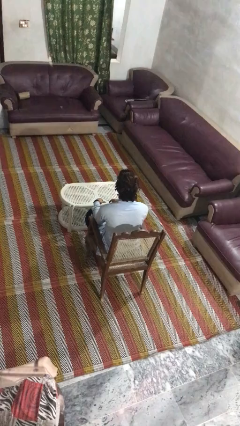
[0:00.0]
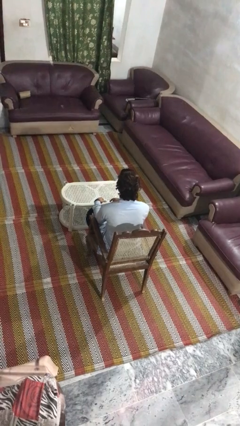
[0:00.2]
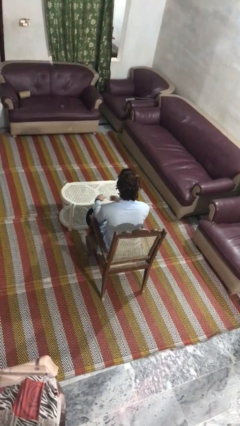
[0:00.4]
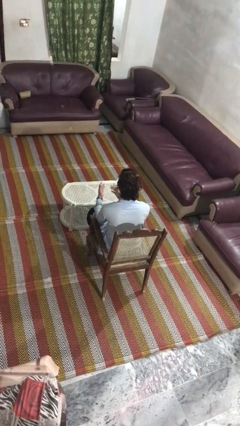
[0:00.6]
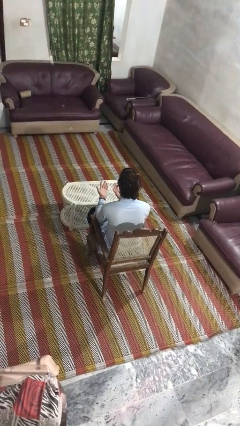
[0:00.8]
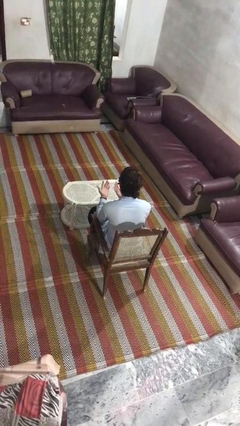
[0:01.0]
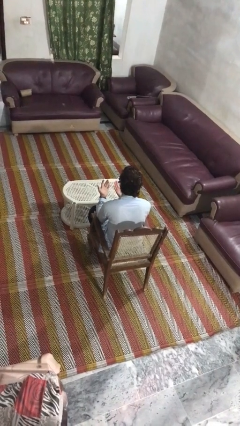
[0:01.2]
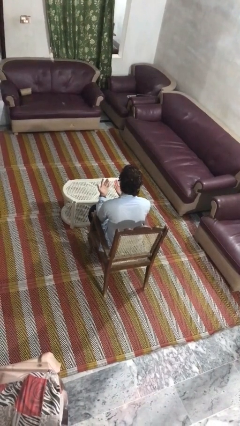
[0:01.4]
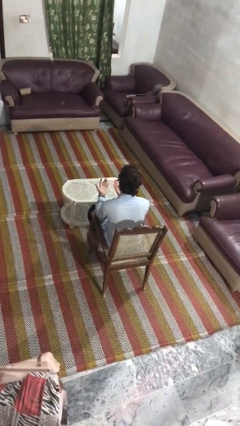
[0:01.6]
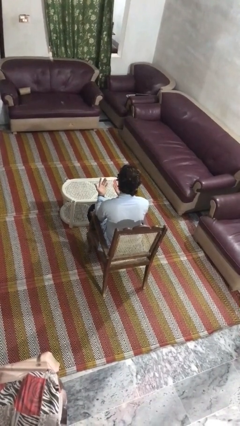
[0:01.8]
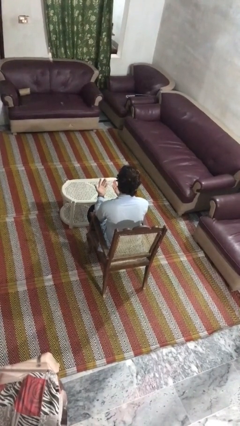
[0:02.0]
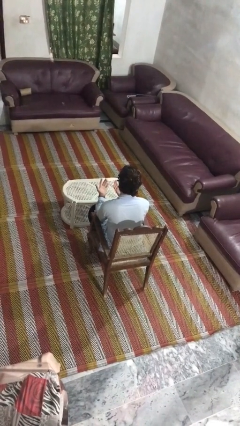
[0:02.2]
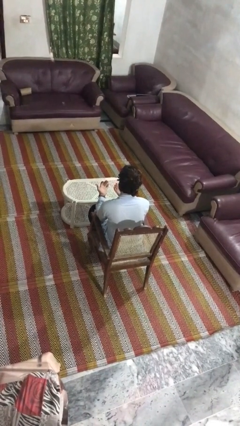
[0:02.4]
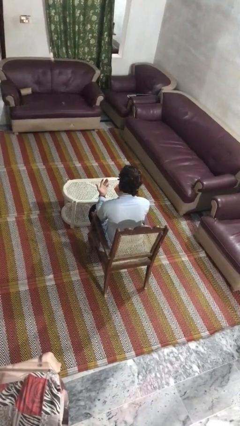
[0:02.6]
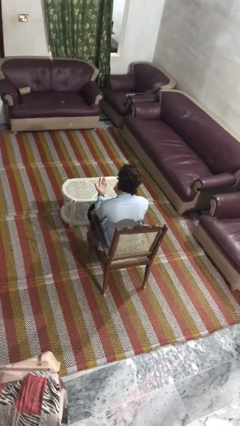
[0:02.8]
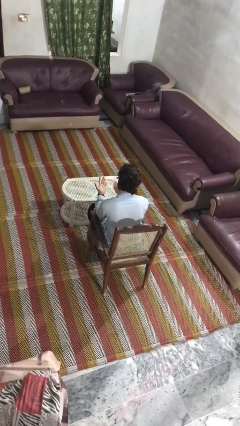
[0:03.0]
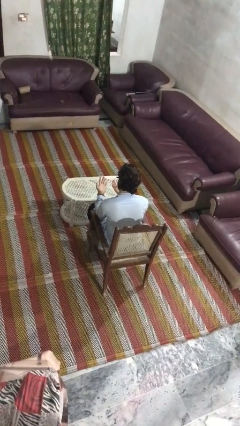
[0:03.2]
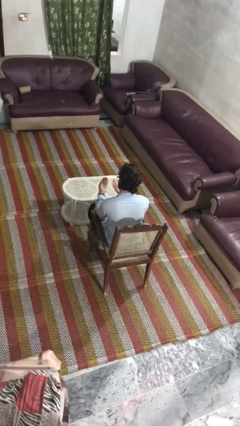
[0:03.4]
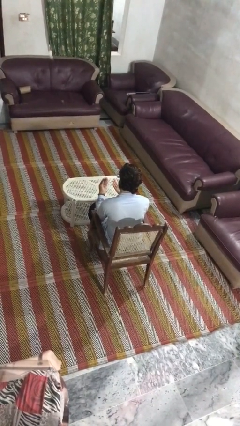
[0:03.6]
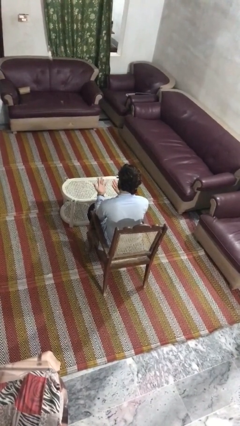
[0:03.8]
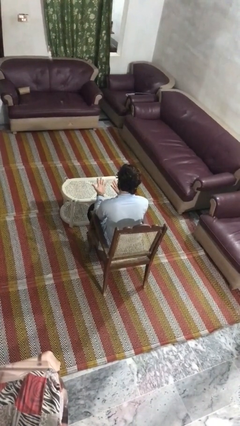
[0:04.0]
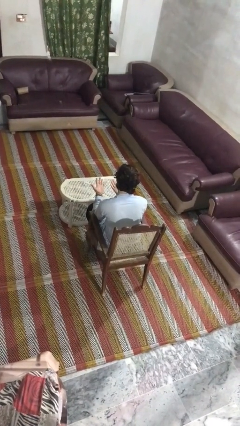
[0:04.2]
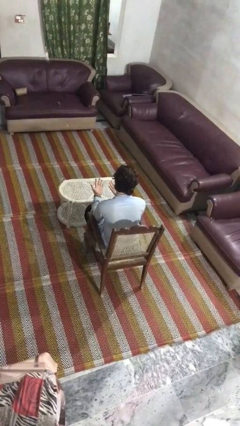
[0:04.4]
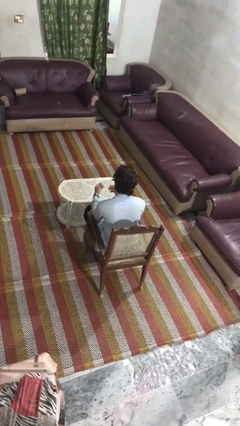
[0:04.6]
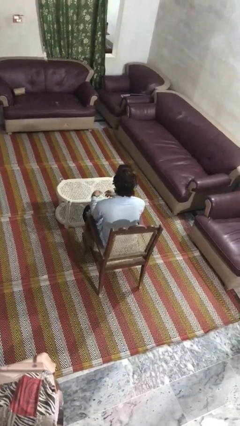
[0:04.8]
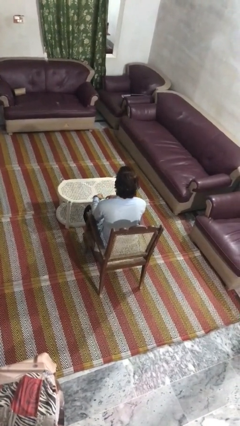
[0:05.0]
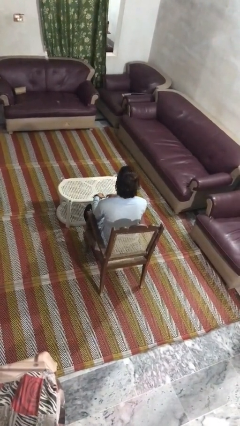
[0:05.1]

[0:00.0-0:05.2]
person looks at hands in lap

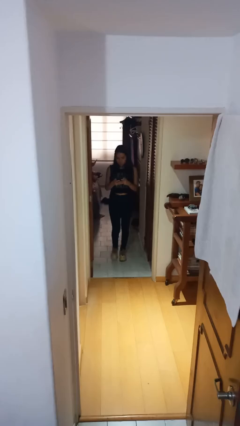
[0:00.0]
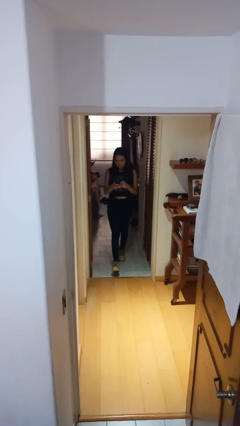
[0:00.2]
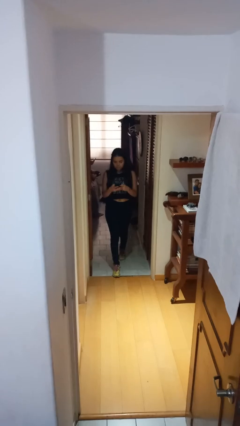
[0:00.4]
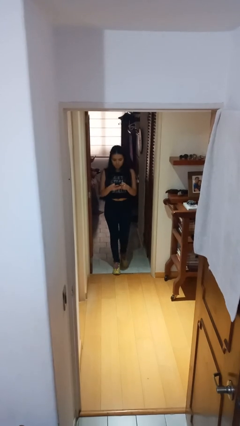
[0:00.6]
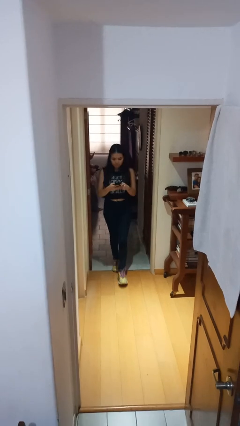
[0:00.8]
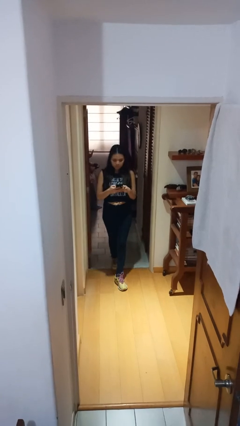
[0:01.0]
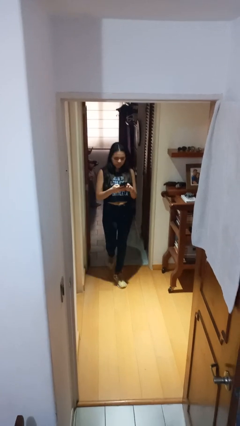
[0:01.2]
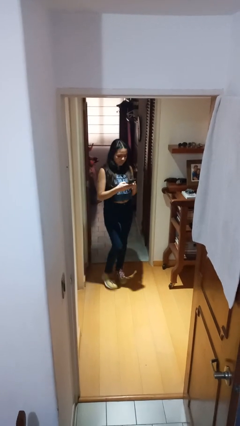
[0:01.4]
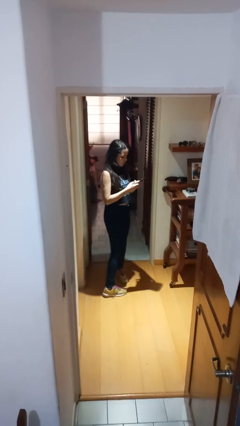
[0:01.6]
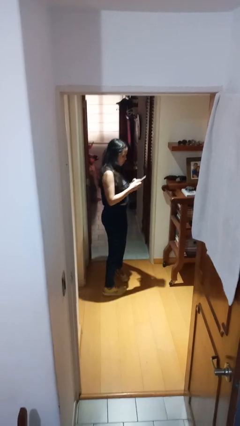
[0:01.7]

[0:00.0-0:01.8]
person enters scene through structure

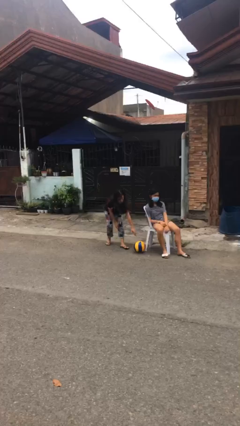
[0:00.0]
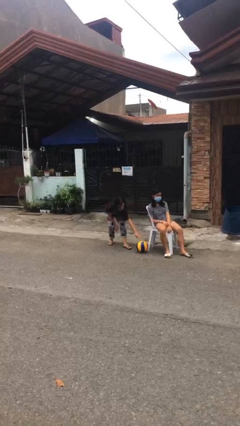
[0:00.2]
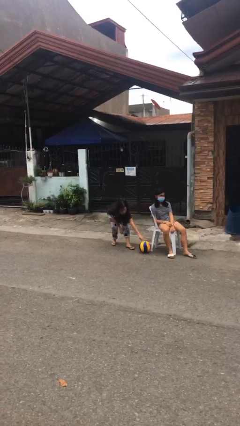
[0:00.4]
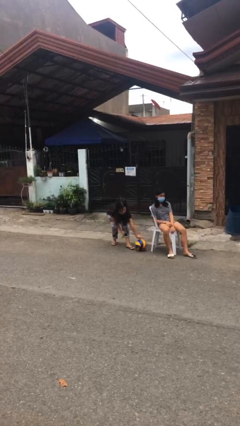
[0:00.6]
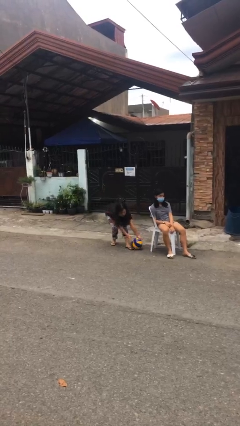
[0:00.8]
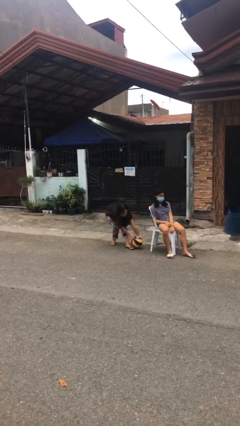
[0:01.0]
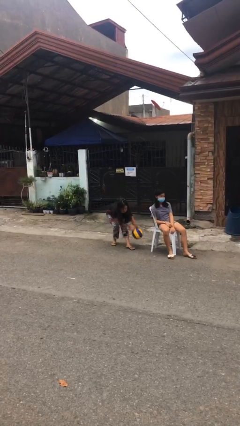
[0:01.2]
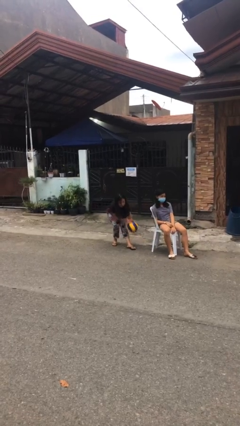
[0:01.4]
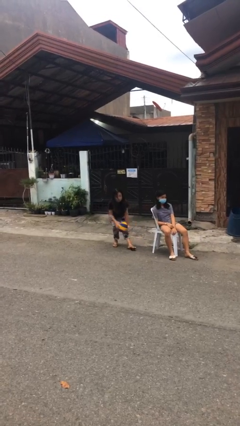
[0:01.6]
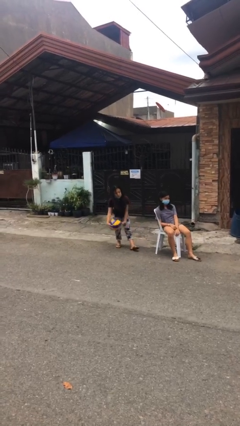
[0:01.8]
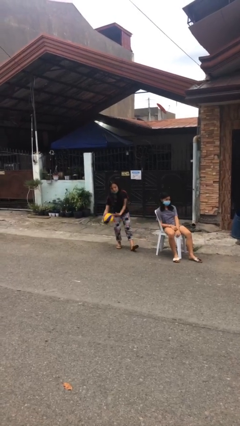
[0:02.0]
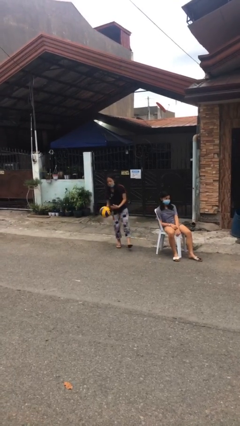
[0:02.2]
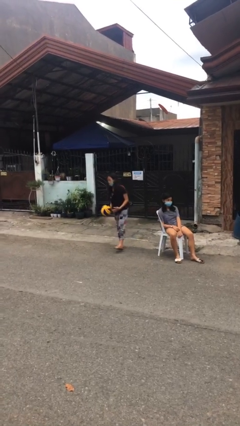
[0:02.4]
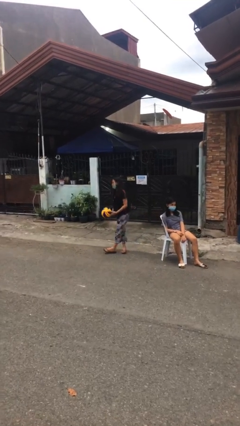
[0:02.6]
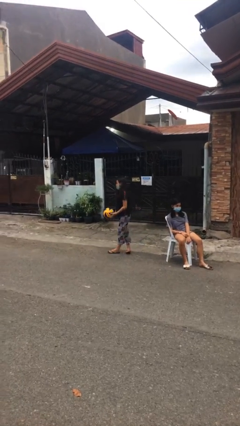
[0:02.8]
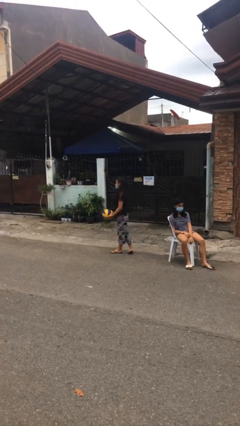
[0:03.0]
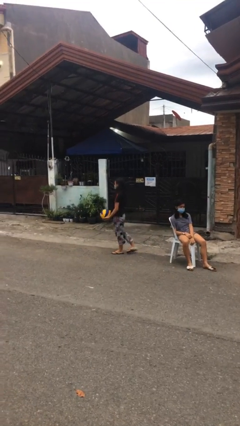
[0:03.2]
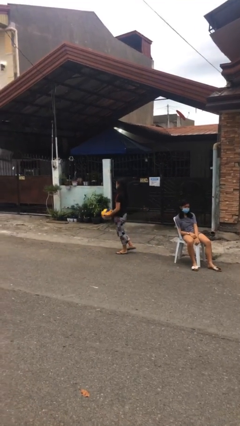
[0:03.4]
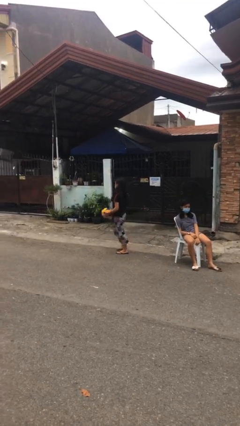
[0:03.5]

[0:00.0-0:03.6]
person steals object from person

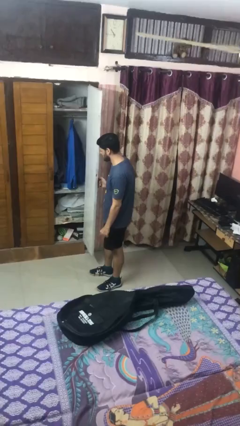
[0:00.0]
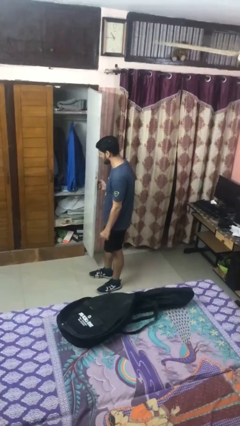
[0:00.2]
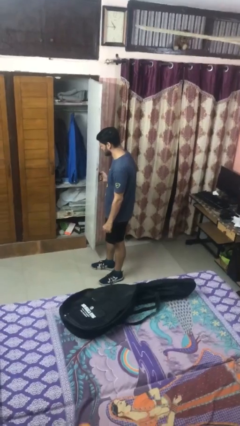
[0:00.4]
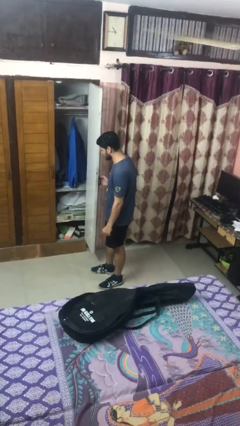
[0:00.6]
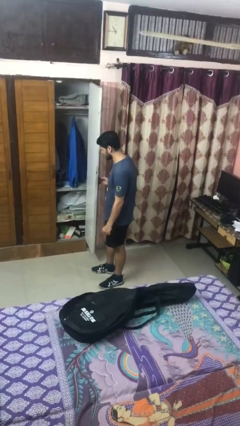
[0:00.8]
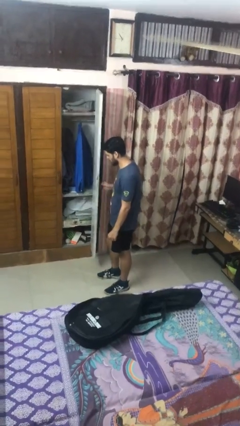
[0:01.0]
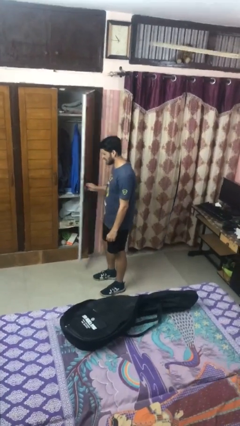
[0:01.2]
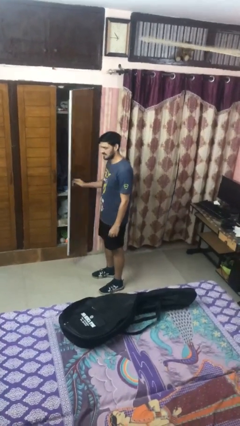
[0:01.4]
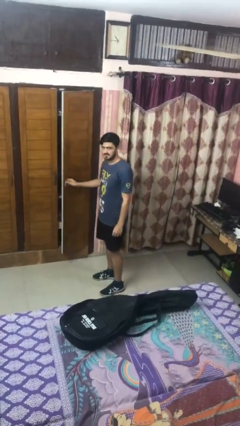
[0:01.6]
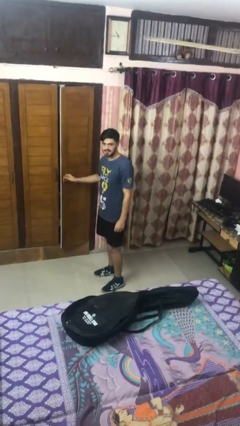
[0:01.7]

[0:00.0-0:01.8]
person closes closet door

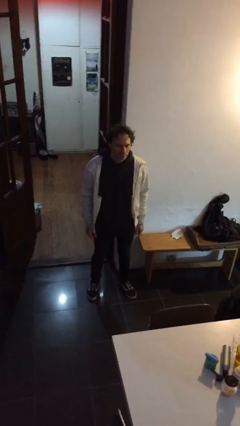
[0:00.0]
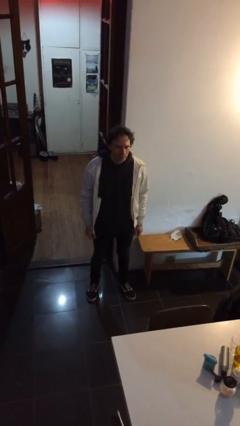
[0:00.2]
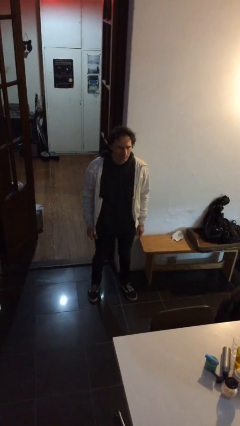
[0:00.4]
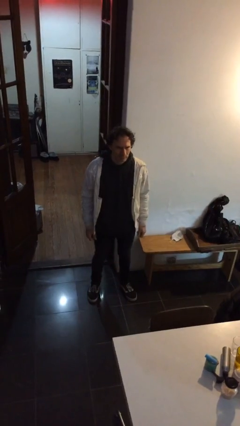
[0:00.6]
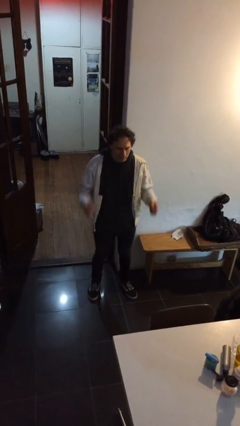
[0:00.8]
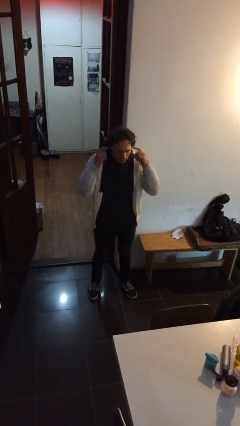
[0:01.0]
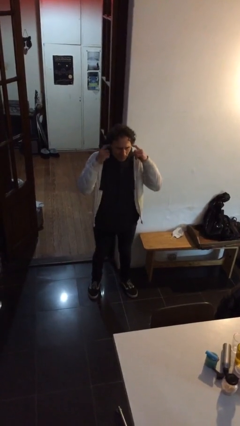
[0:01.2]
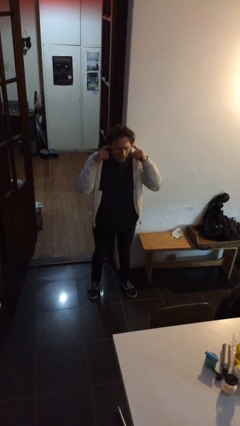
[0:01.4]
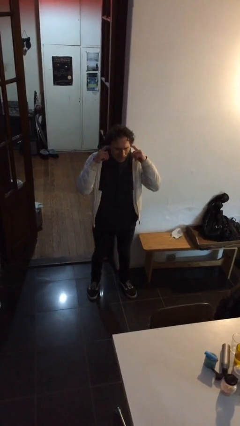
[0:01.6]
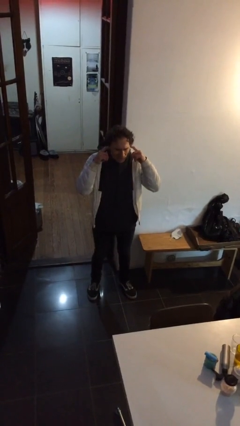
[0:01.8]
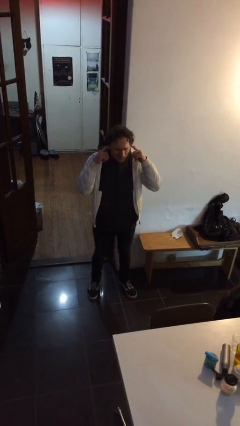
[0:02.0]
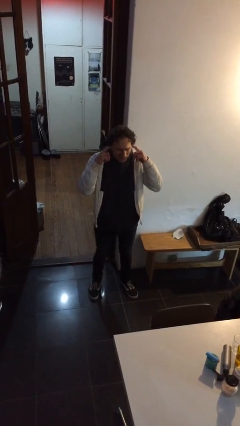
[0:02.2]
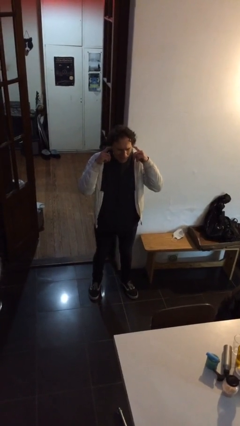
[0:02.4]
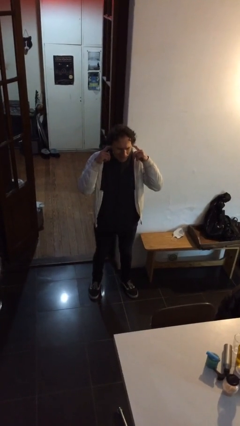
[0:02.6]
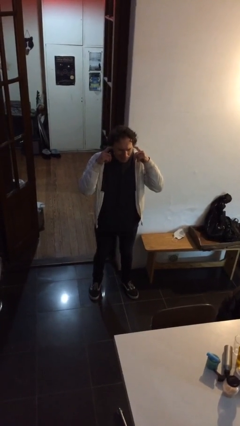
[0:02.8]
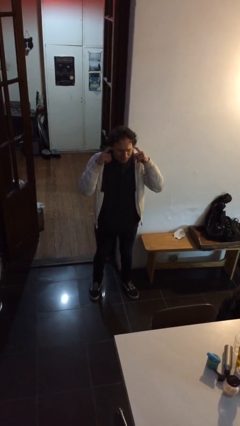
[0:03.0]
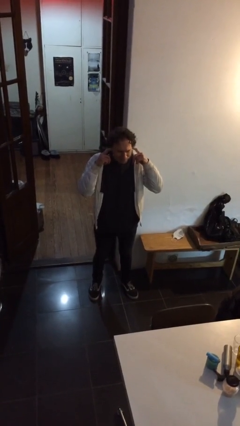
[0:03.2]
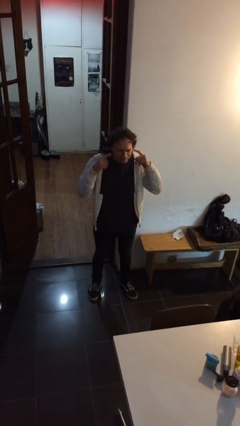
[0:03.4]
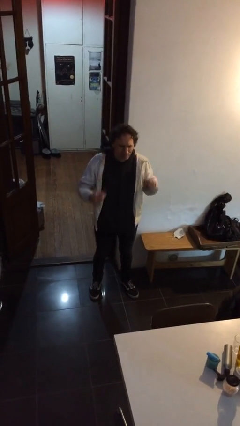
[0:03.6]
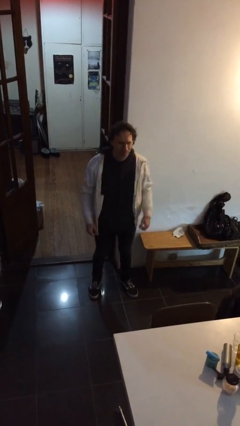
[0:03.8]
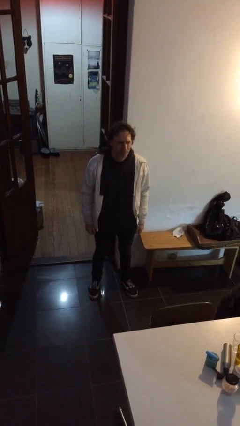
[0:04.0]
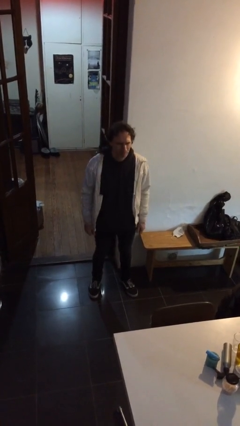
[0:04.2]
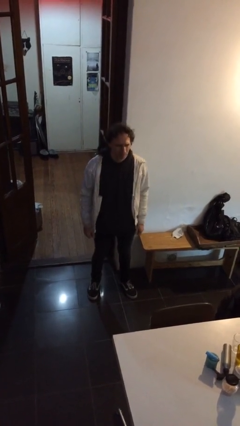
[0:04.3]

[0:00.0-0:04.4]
person puts fingers in ear

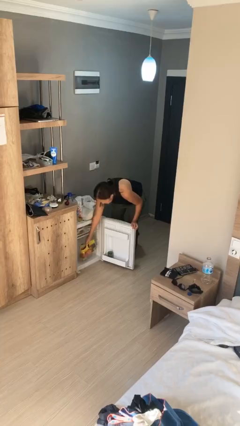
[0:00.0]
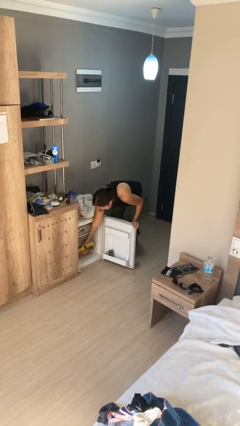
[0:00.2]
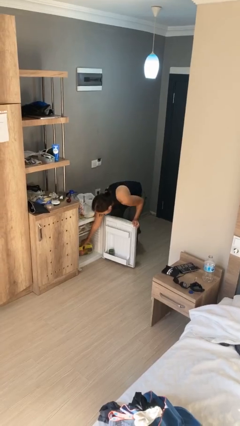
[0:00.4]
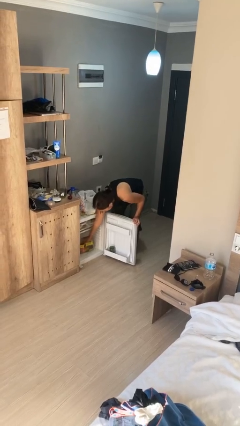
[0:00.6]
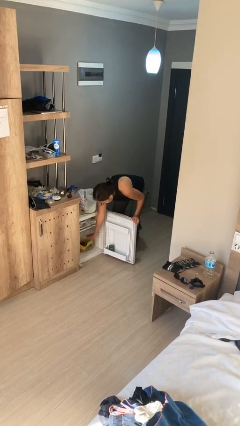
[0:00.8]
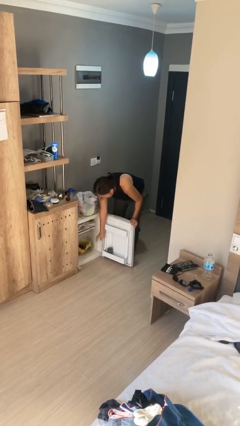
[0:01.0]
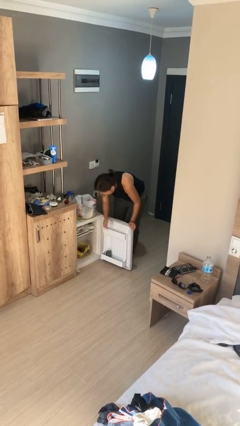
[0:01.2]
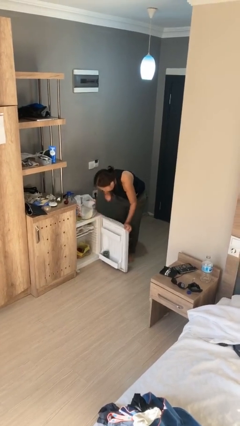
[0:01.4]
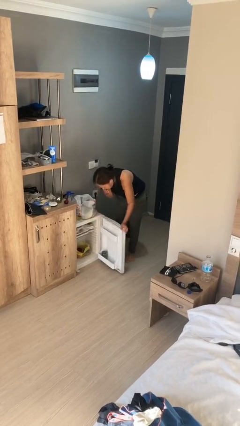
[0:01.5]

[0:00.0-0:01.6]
person puts object into refrigerator
